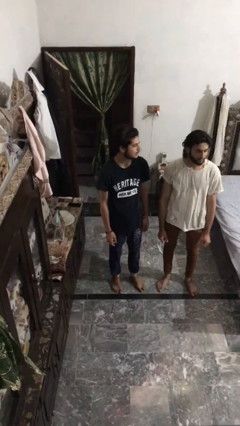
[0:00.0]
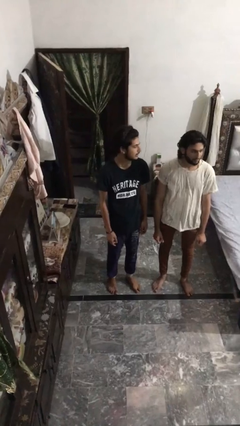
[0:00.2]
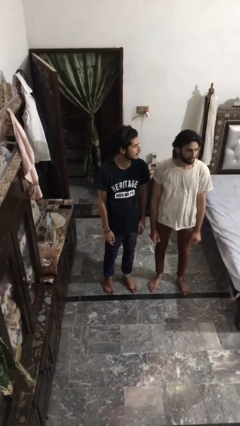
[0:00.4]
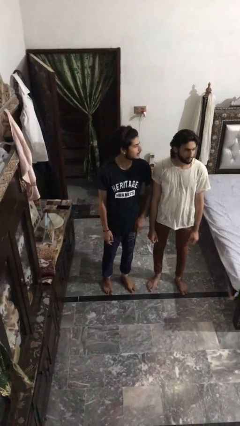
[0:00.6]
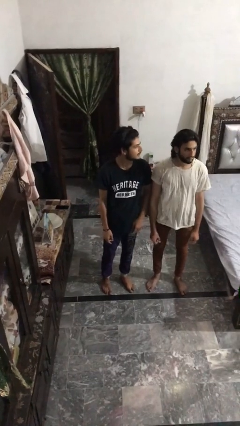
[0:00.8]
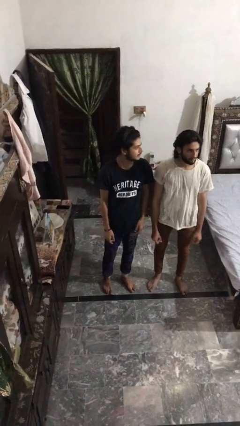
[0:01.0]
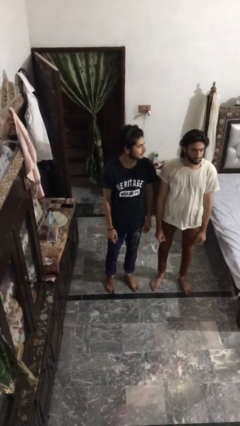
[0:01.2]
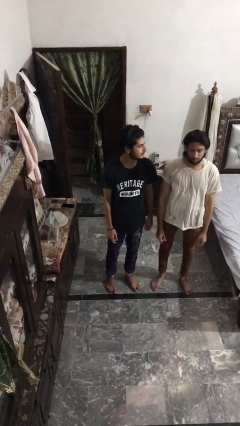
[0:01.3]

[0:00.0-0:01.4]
person nudges person with elbow

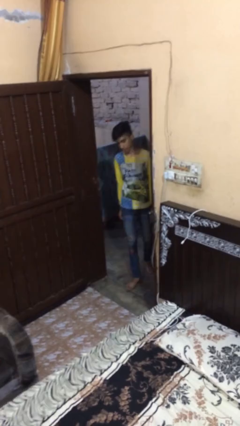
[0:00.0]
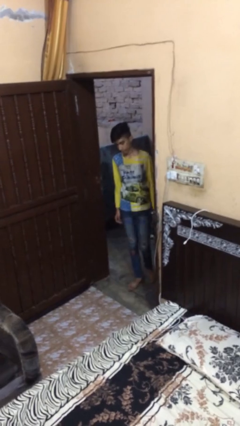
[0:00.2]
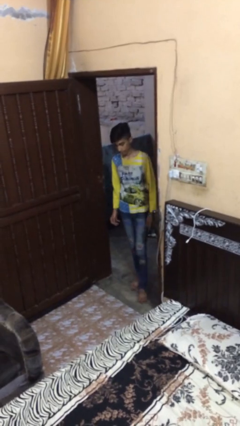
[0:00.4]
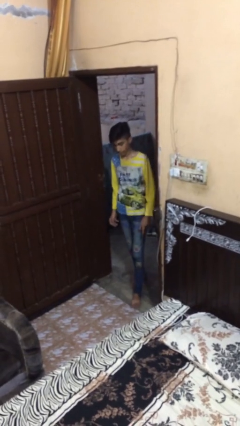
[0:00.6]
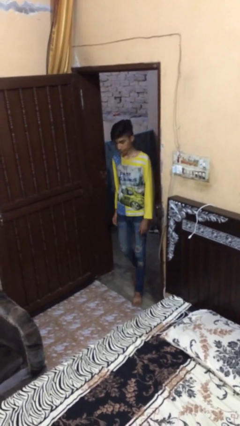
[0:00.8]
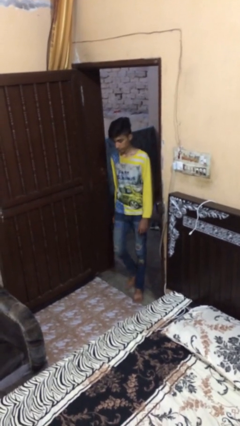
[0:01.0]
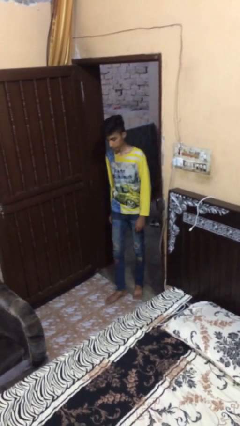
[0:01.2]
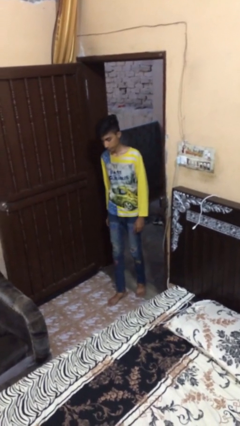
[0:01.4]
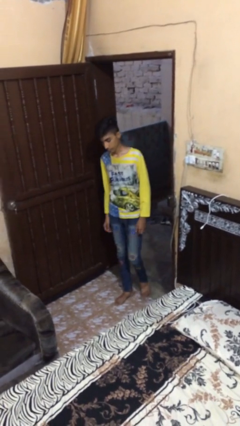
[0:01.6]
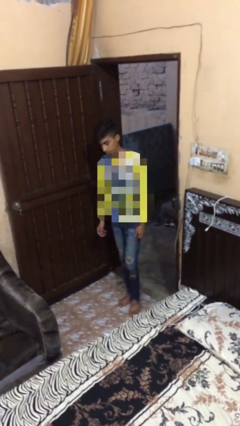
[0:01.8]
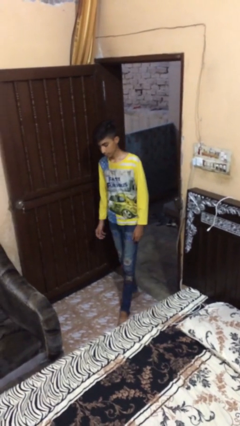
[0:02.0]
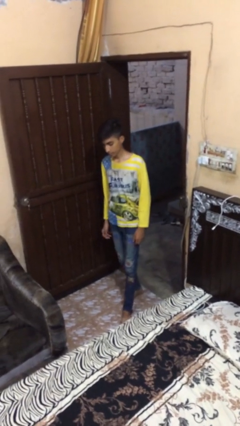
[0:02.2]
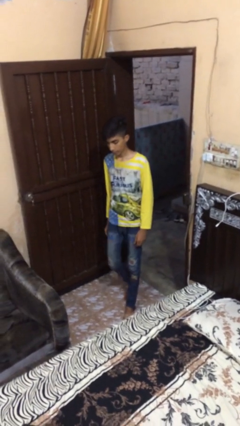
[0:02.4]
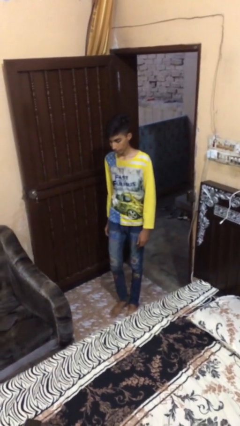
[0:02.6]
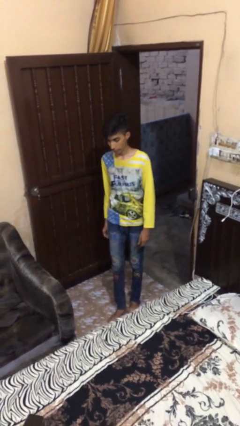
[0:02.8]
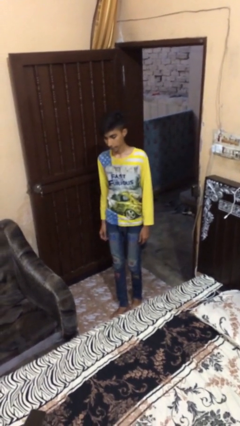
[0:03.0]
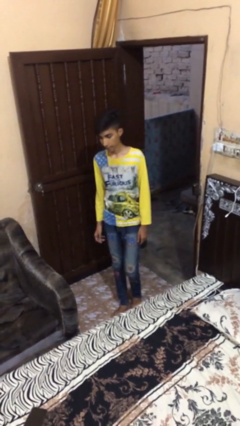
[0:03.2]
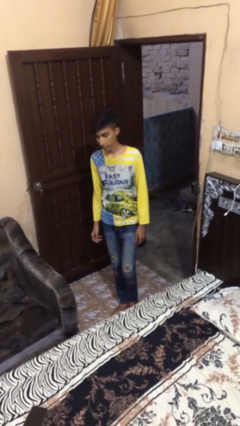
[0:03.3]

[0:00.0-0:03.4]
person enters scene through structure

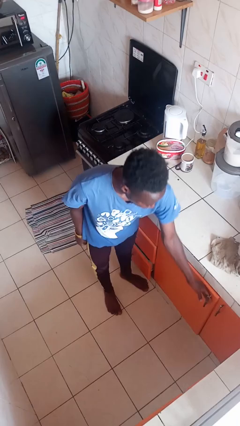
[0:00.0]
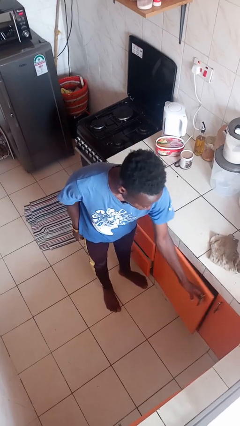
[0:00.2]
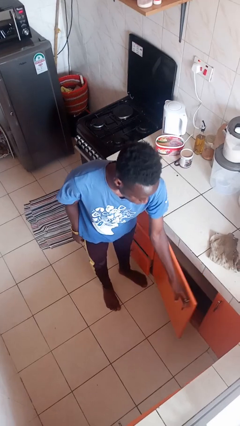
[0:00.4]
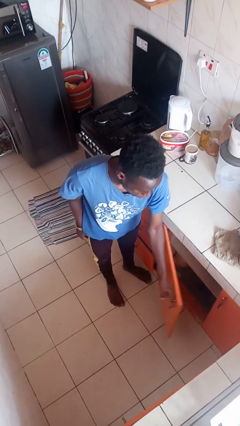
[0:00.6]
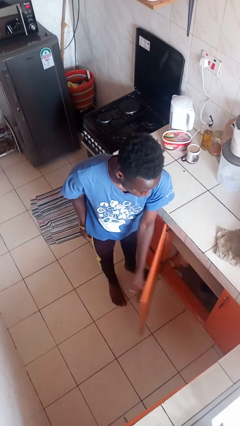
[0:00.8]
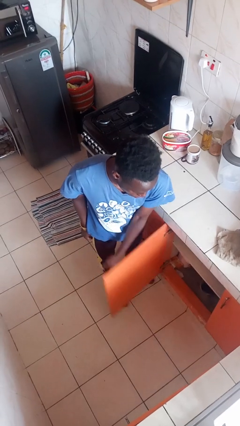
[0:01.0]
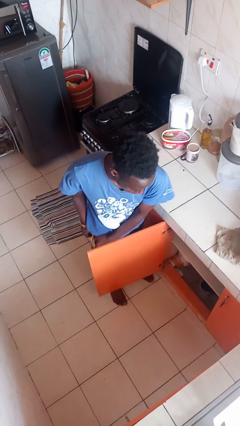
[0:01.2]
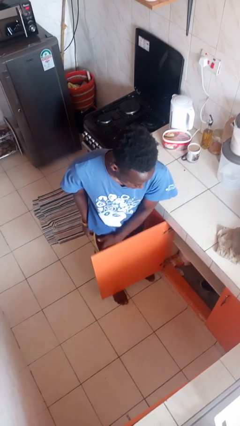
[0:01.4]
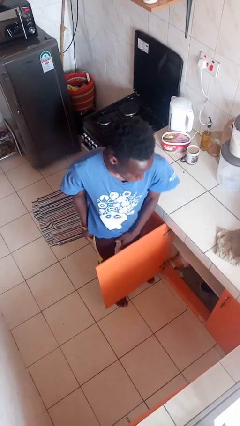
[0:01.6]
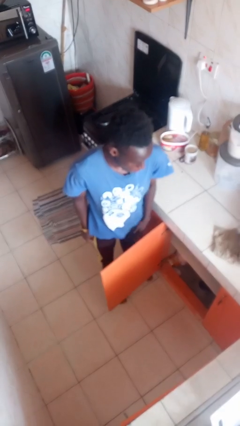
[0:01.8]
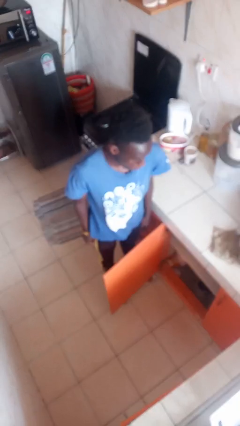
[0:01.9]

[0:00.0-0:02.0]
person opens cabinet

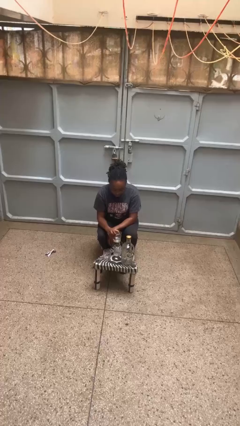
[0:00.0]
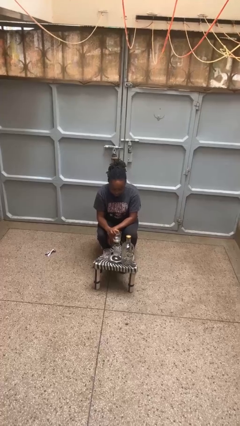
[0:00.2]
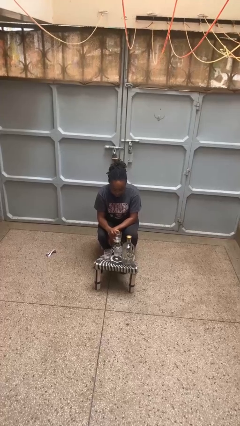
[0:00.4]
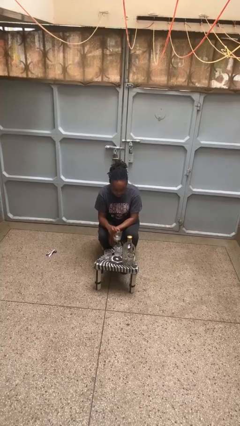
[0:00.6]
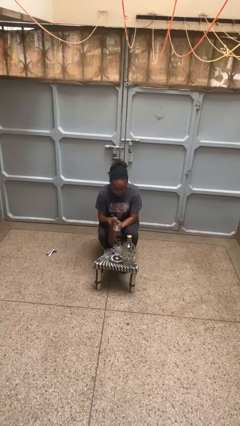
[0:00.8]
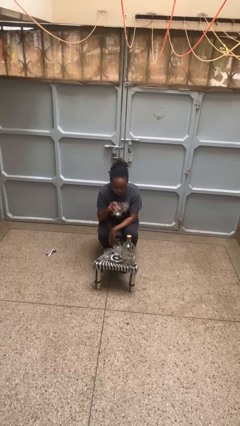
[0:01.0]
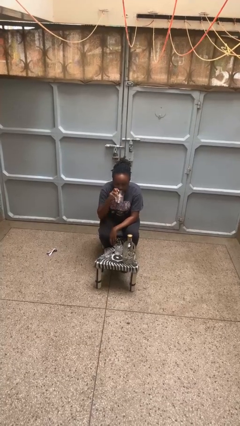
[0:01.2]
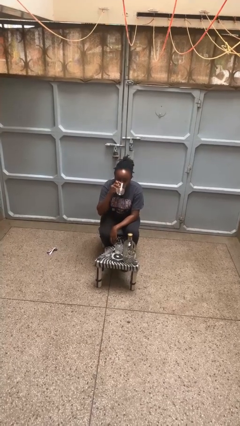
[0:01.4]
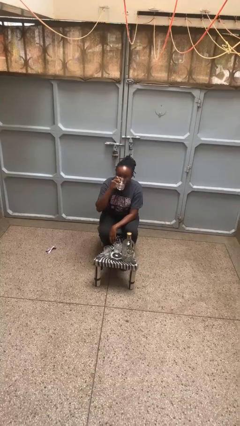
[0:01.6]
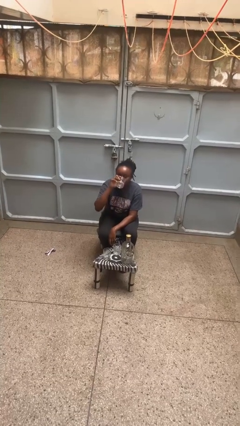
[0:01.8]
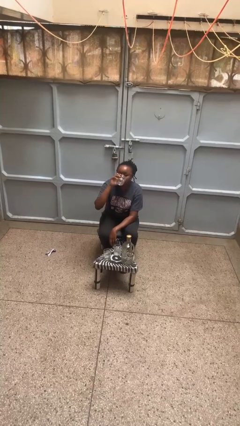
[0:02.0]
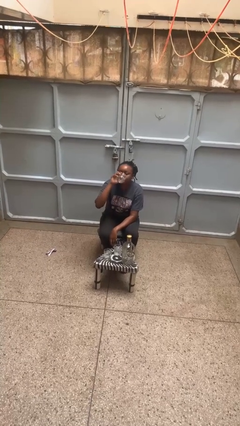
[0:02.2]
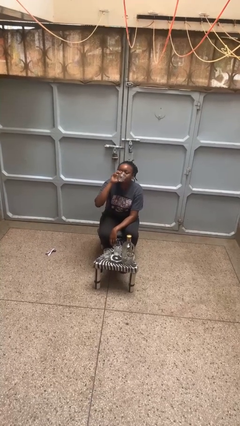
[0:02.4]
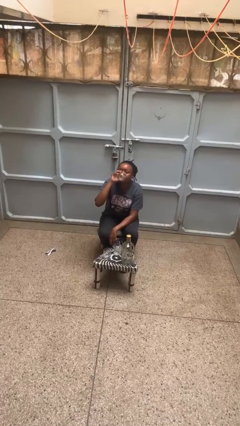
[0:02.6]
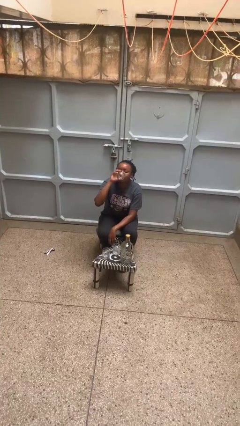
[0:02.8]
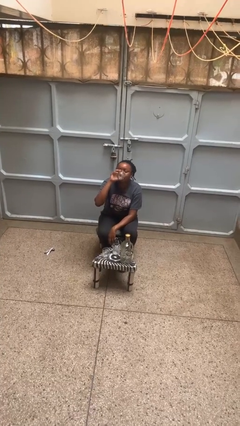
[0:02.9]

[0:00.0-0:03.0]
person drinks from shotglass

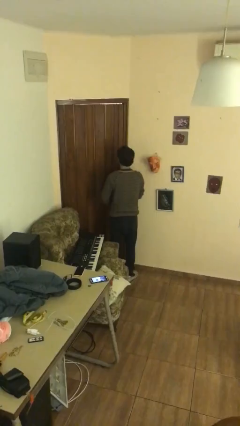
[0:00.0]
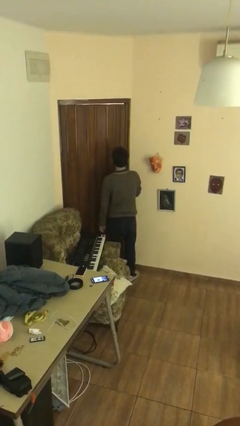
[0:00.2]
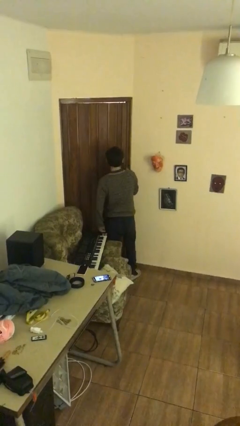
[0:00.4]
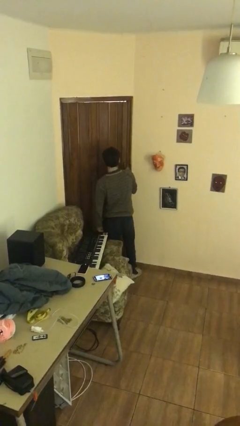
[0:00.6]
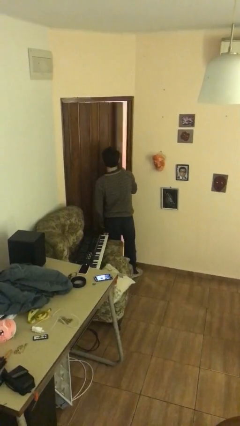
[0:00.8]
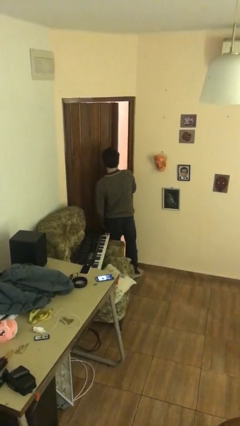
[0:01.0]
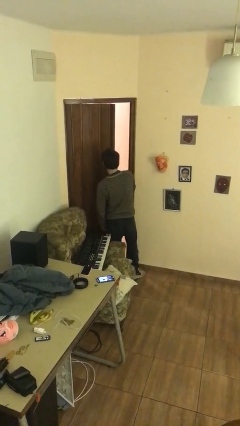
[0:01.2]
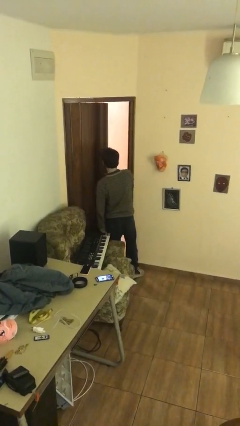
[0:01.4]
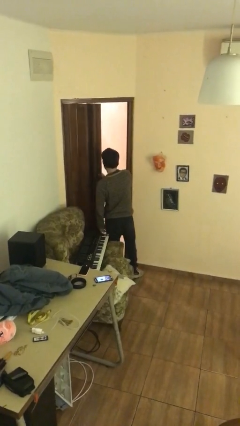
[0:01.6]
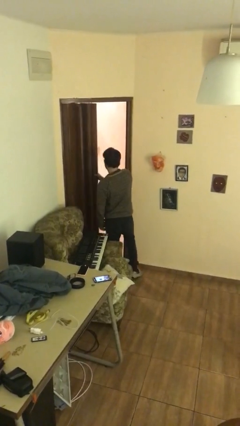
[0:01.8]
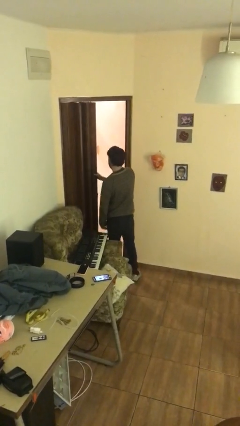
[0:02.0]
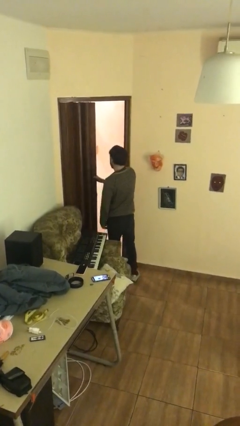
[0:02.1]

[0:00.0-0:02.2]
person opens sliding door

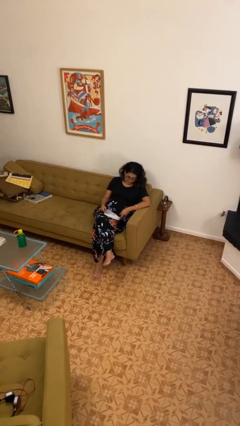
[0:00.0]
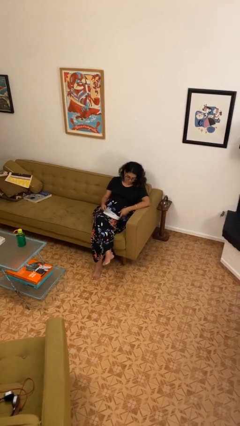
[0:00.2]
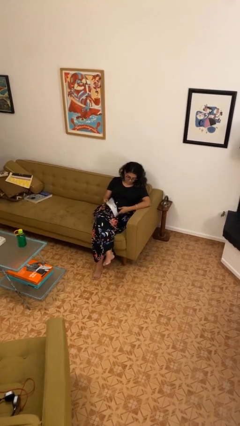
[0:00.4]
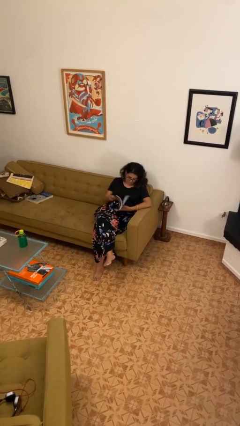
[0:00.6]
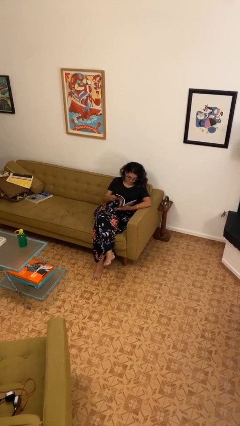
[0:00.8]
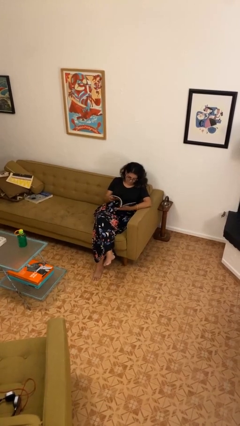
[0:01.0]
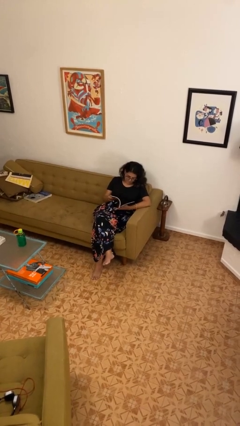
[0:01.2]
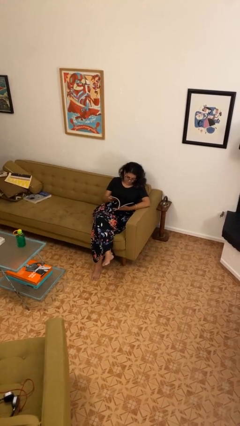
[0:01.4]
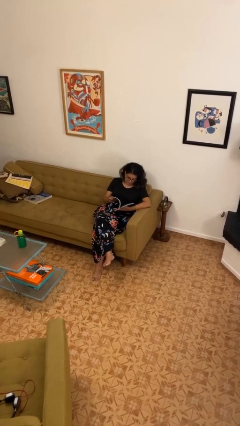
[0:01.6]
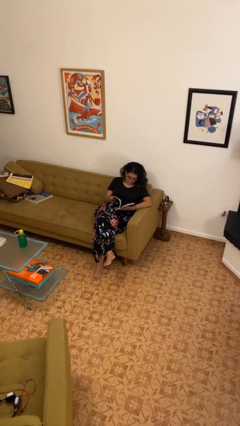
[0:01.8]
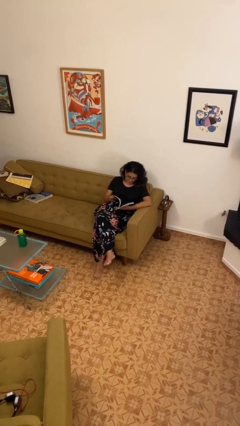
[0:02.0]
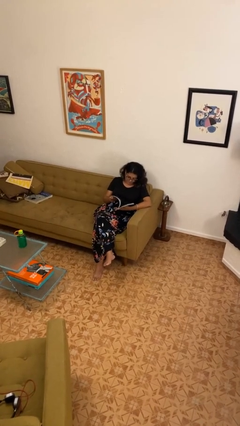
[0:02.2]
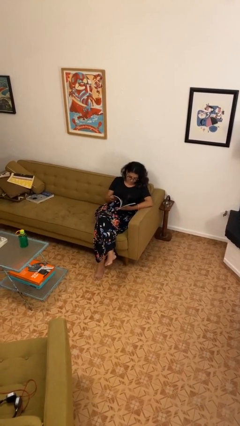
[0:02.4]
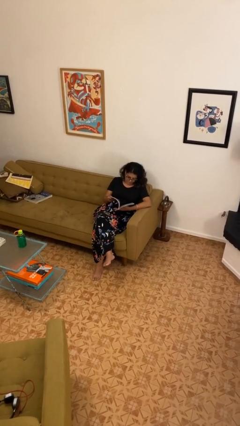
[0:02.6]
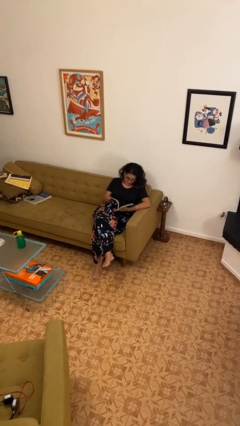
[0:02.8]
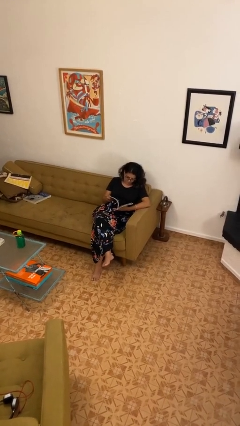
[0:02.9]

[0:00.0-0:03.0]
person reads magazine

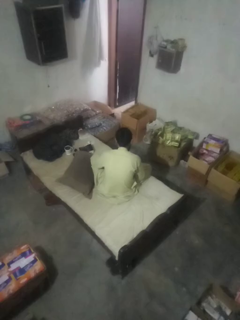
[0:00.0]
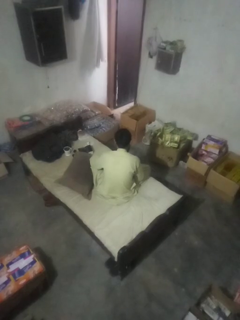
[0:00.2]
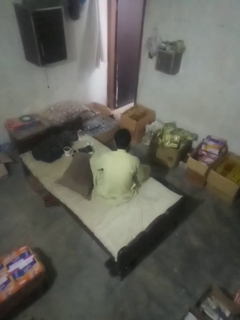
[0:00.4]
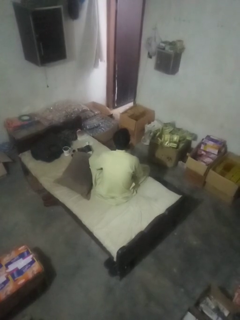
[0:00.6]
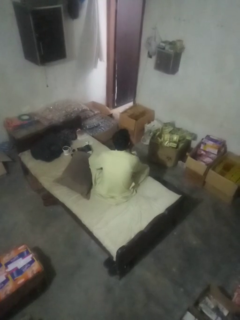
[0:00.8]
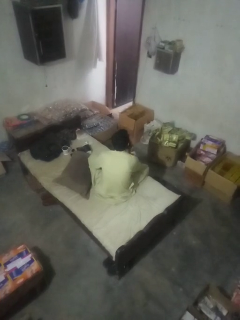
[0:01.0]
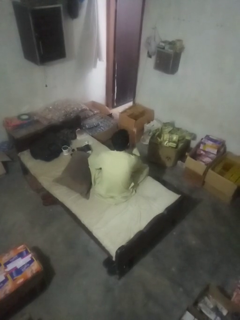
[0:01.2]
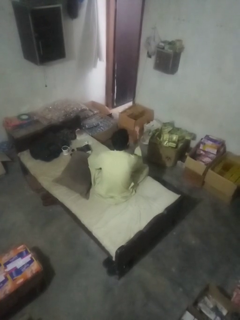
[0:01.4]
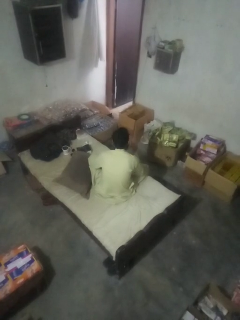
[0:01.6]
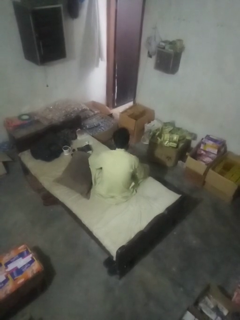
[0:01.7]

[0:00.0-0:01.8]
person gestures blow kiss

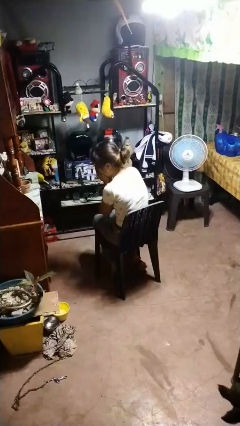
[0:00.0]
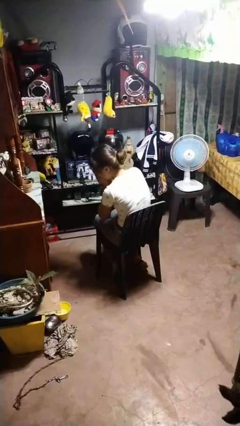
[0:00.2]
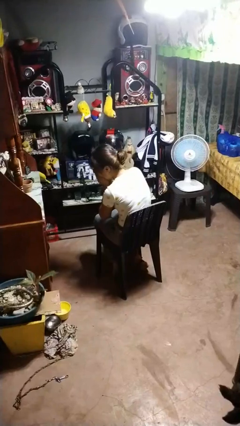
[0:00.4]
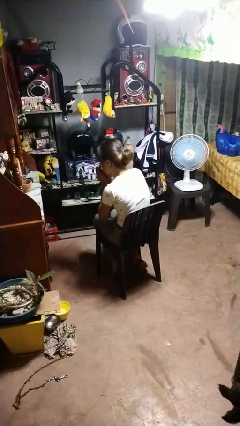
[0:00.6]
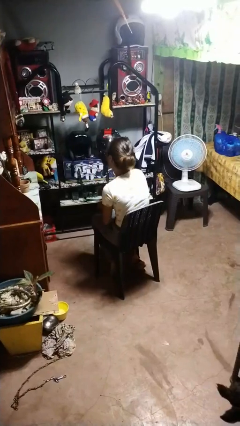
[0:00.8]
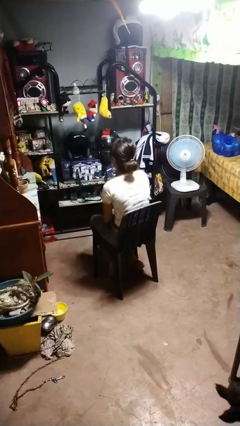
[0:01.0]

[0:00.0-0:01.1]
person sneezes into hand
